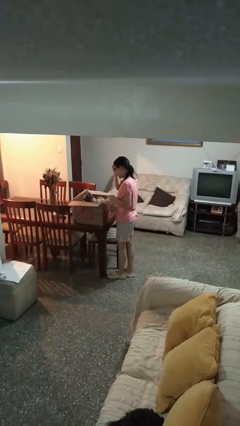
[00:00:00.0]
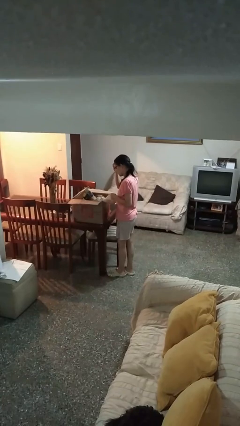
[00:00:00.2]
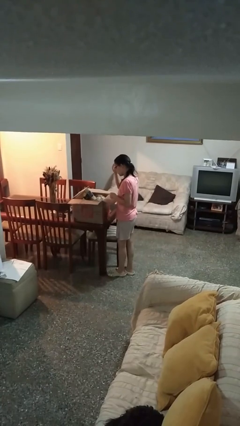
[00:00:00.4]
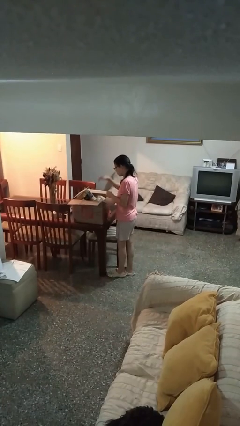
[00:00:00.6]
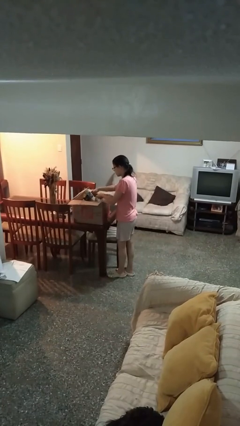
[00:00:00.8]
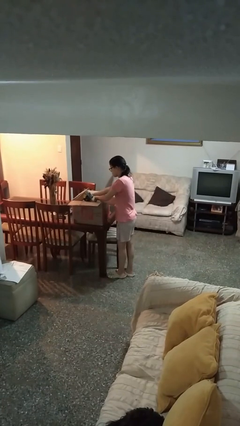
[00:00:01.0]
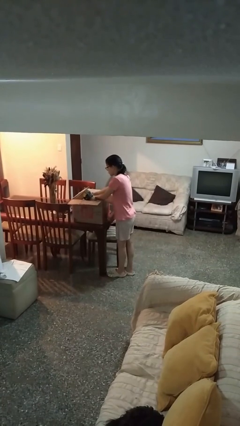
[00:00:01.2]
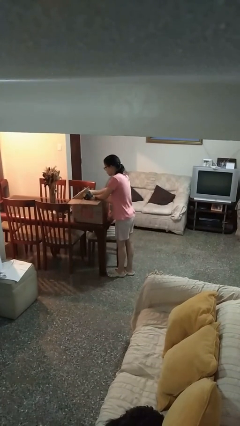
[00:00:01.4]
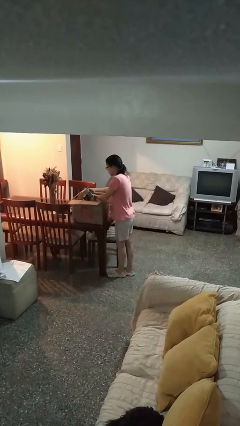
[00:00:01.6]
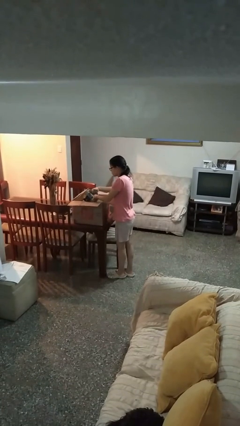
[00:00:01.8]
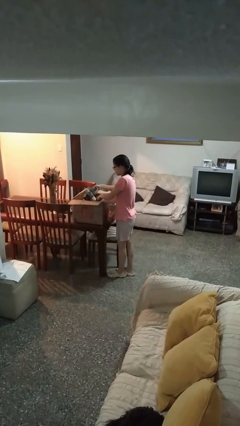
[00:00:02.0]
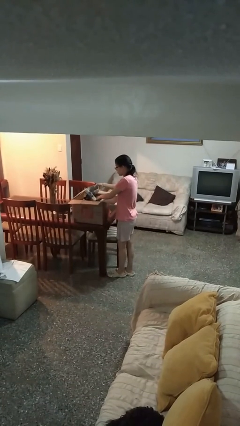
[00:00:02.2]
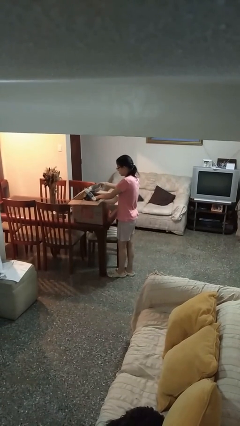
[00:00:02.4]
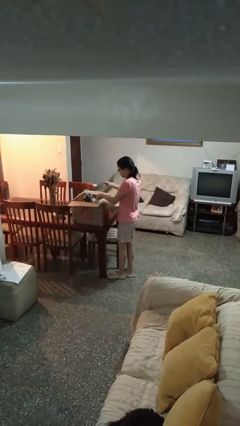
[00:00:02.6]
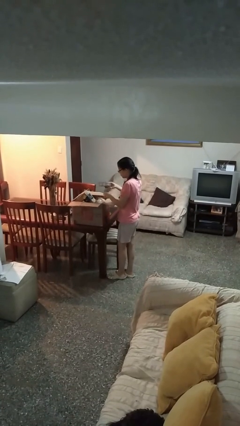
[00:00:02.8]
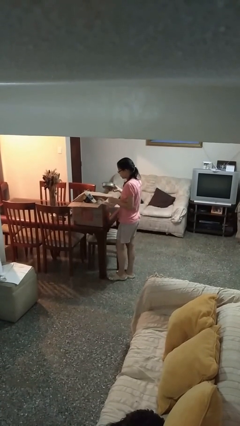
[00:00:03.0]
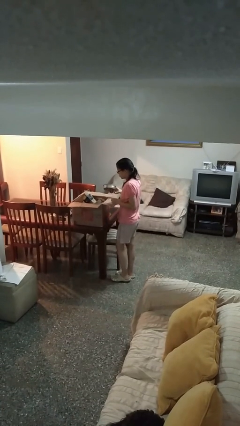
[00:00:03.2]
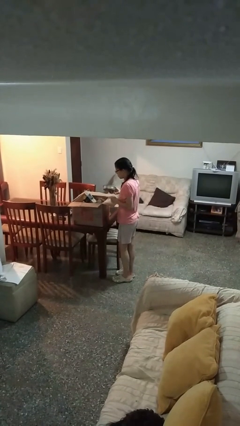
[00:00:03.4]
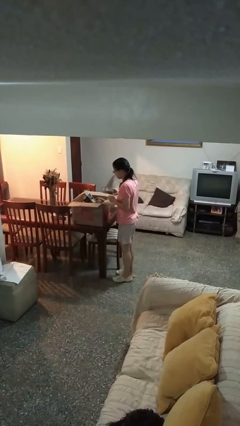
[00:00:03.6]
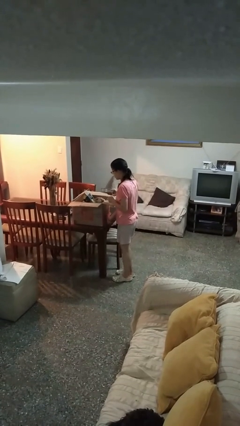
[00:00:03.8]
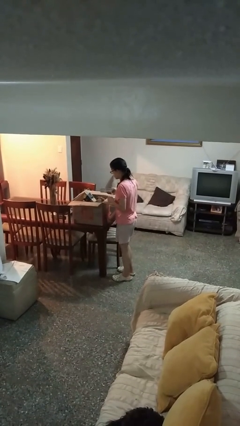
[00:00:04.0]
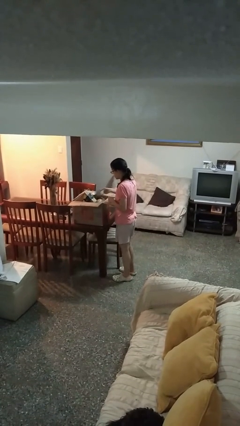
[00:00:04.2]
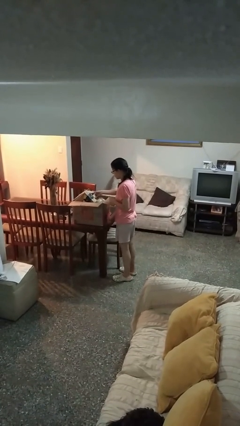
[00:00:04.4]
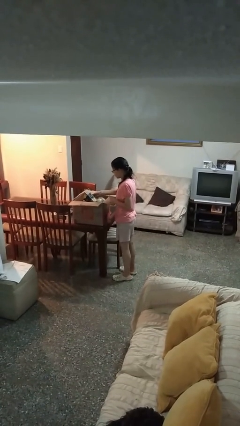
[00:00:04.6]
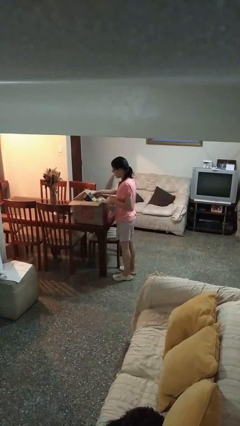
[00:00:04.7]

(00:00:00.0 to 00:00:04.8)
person searches in box

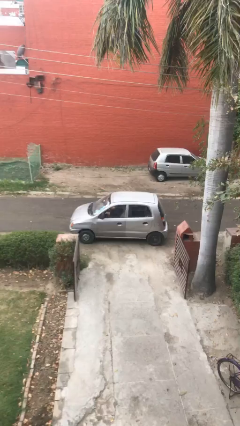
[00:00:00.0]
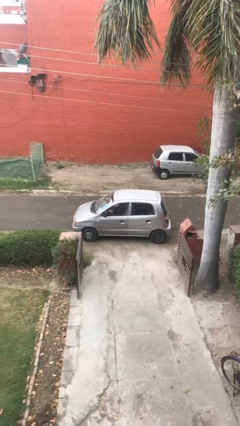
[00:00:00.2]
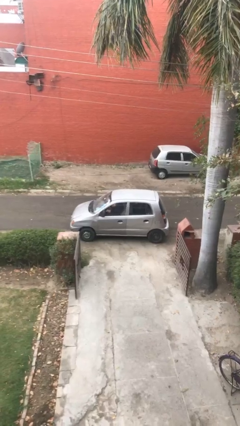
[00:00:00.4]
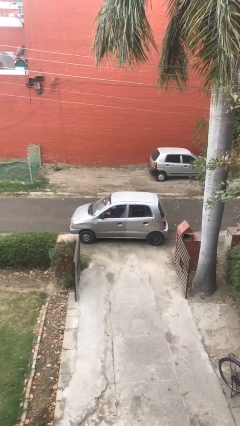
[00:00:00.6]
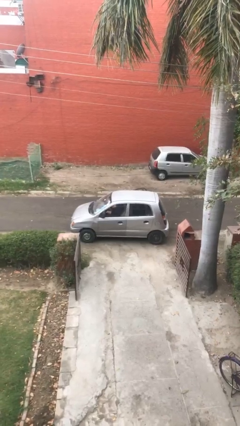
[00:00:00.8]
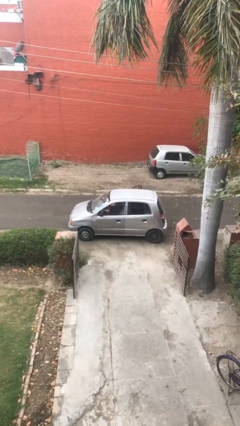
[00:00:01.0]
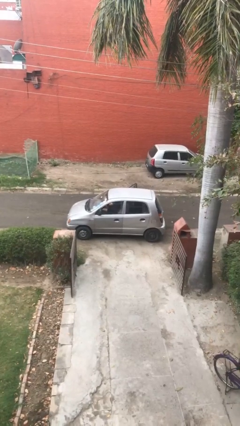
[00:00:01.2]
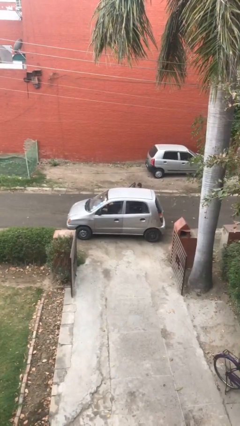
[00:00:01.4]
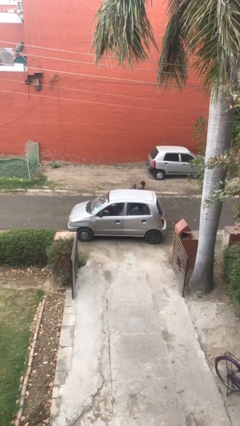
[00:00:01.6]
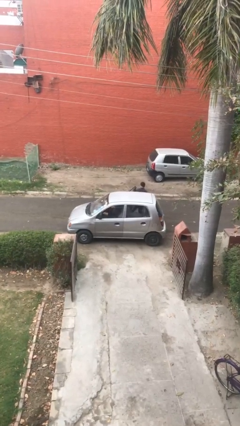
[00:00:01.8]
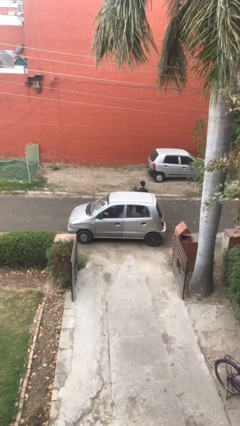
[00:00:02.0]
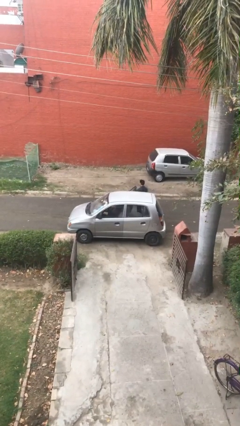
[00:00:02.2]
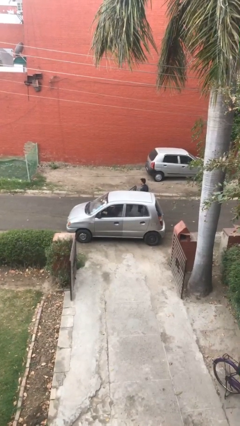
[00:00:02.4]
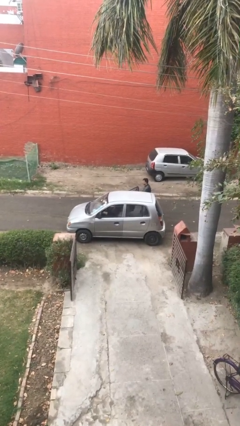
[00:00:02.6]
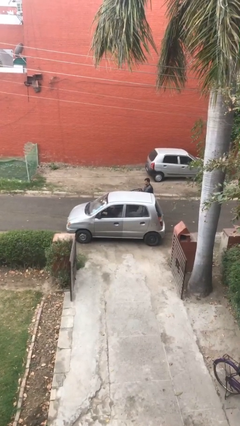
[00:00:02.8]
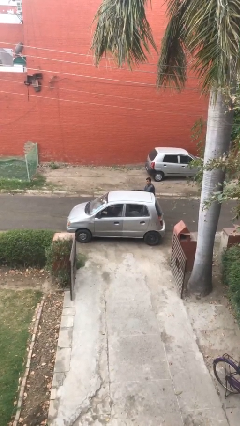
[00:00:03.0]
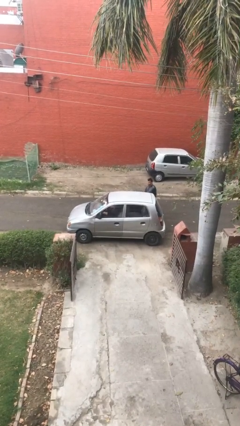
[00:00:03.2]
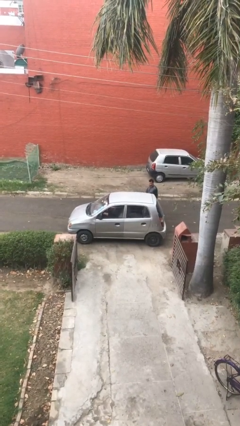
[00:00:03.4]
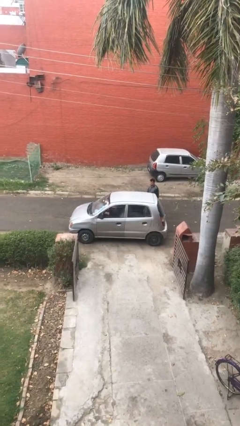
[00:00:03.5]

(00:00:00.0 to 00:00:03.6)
car drops off person

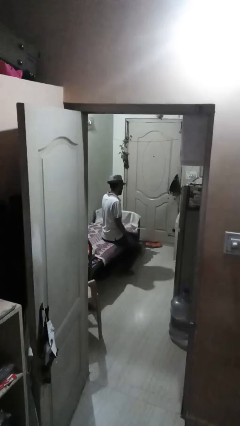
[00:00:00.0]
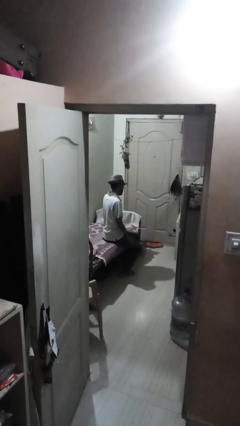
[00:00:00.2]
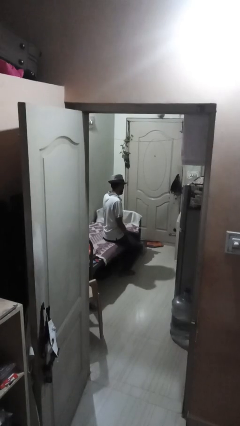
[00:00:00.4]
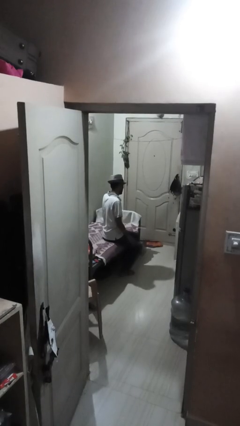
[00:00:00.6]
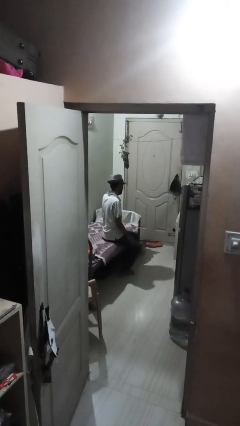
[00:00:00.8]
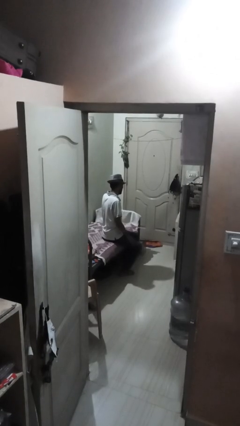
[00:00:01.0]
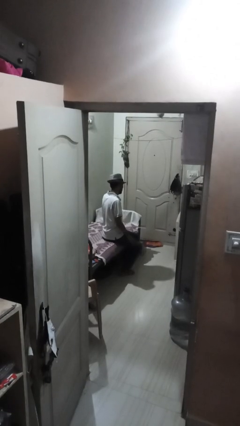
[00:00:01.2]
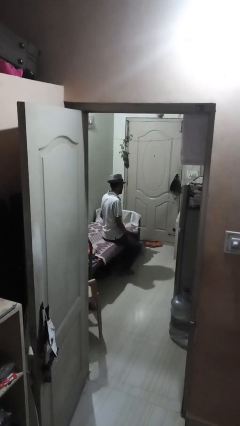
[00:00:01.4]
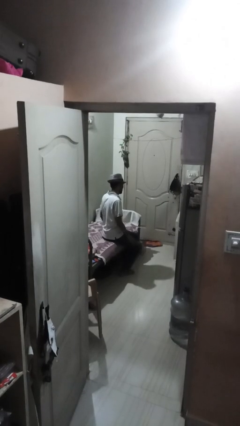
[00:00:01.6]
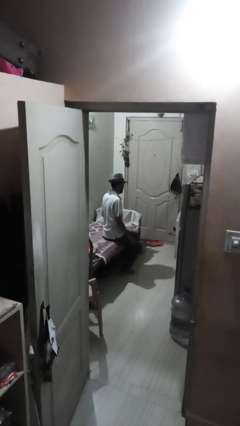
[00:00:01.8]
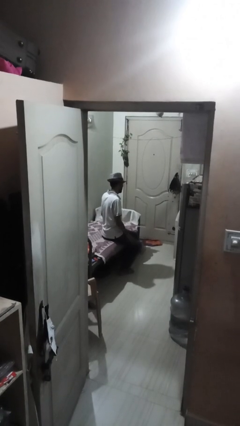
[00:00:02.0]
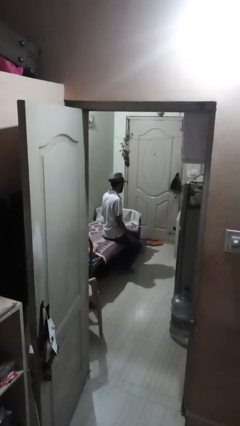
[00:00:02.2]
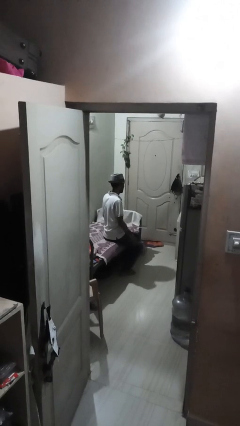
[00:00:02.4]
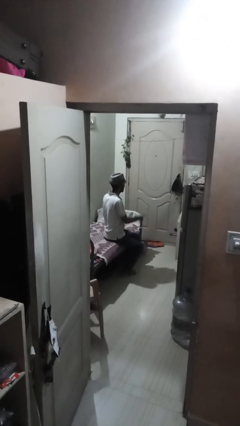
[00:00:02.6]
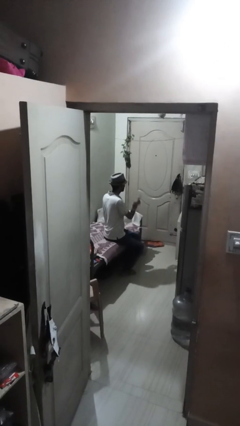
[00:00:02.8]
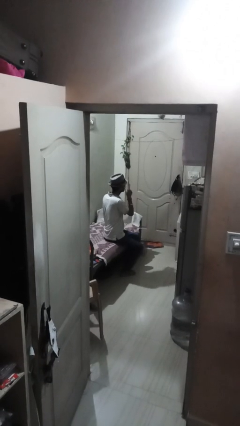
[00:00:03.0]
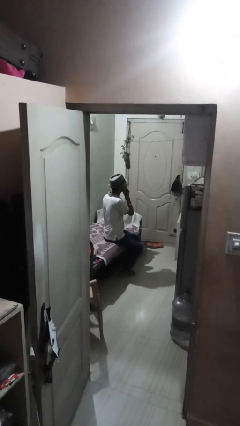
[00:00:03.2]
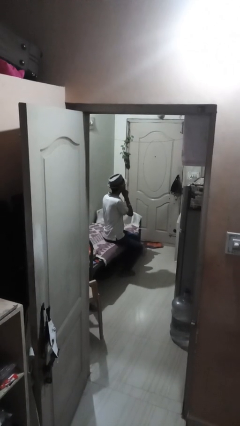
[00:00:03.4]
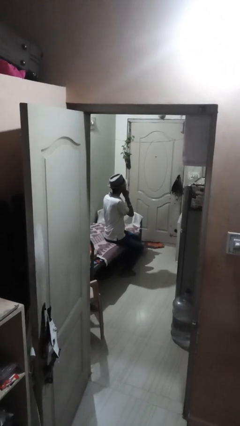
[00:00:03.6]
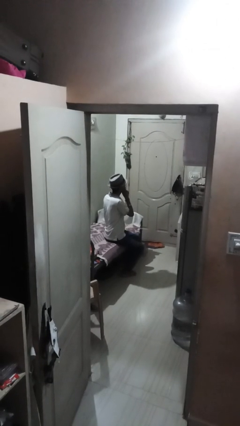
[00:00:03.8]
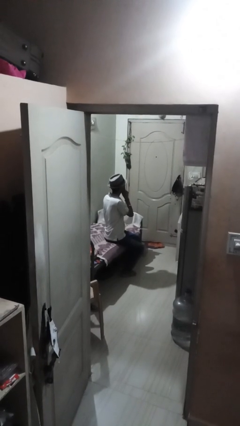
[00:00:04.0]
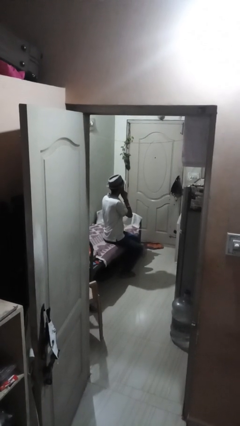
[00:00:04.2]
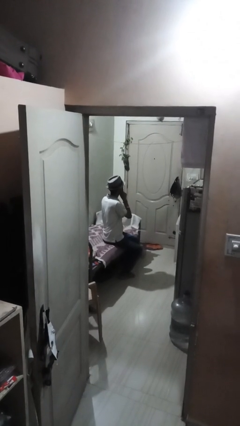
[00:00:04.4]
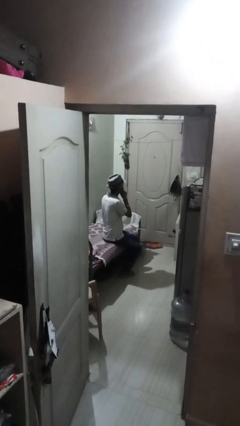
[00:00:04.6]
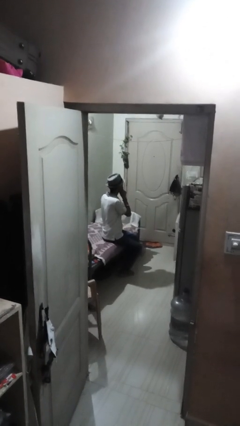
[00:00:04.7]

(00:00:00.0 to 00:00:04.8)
person gestures be quiet

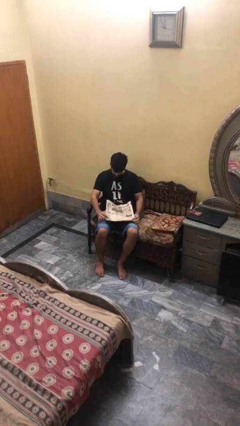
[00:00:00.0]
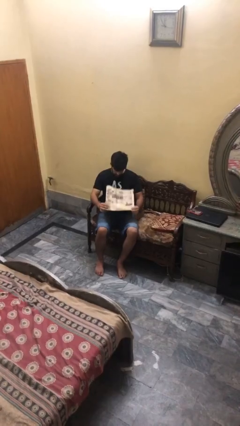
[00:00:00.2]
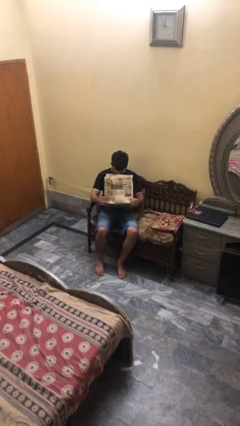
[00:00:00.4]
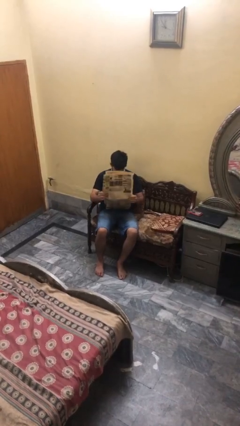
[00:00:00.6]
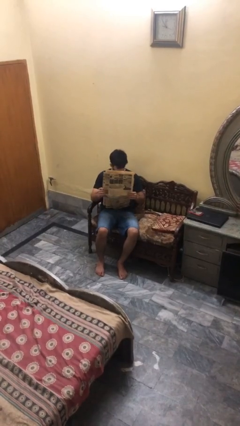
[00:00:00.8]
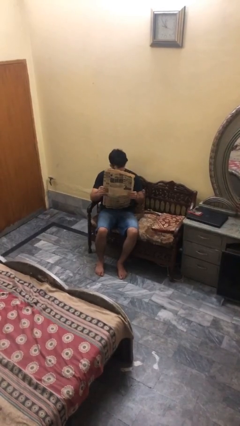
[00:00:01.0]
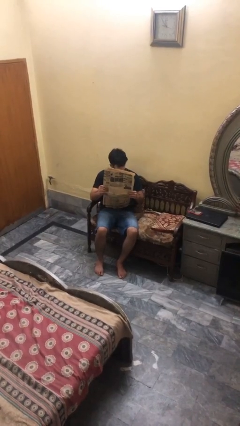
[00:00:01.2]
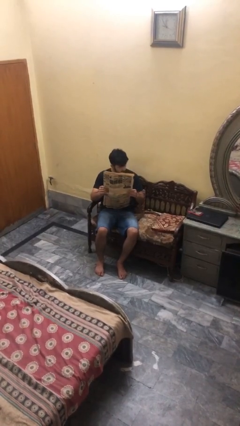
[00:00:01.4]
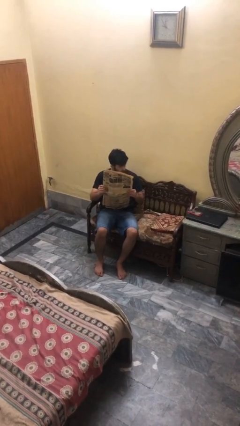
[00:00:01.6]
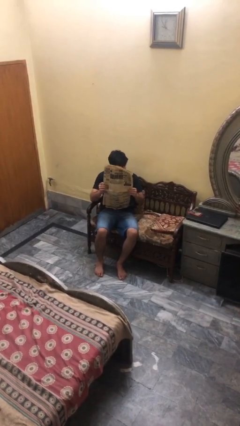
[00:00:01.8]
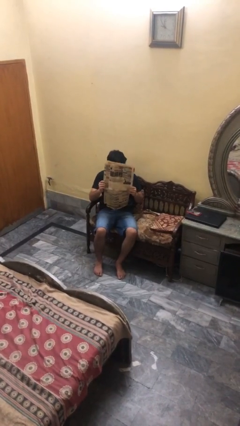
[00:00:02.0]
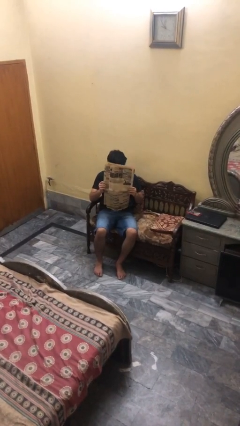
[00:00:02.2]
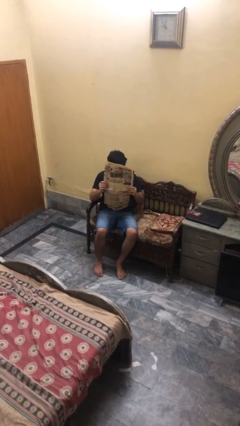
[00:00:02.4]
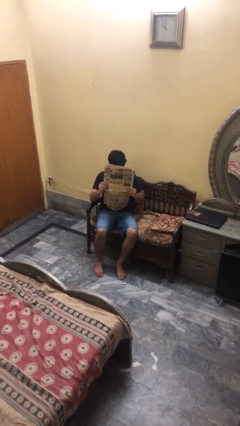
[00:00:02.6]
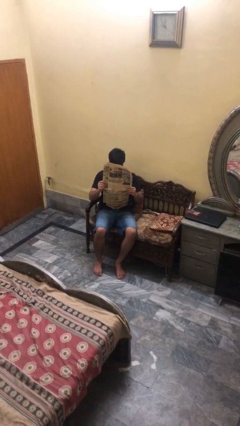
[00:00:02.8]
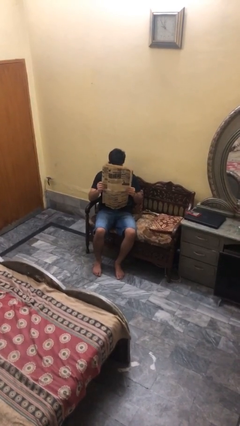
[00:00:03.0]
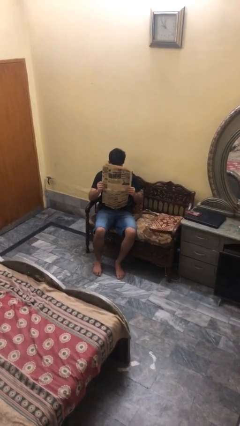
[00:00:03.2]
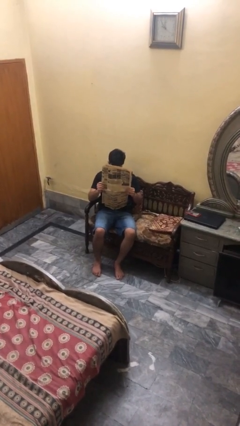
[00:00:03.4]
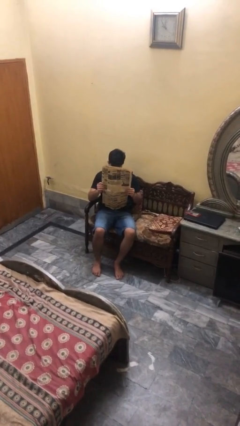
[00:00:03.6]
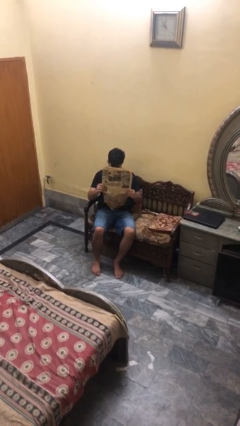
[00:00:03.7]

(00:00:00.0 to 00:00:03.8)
person reads newspaper

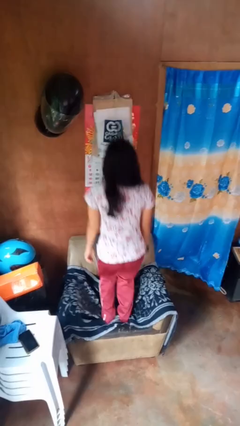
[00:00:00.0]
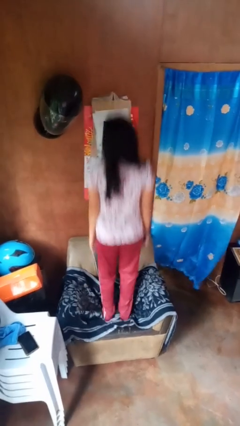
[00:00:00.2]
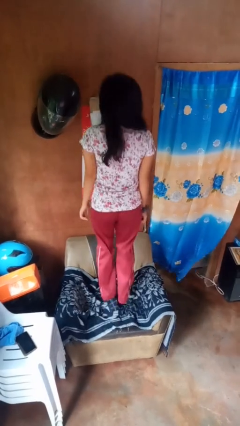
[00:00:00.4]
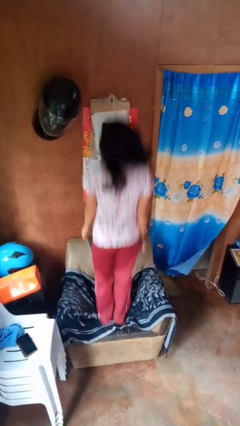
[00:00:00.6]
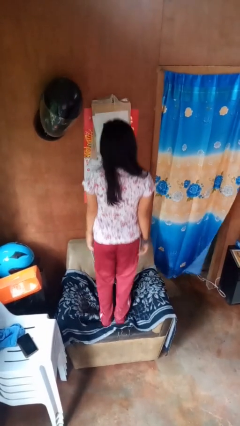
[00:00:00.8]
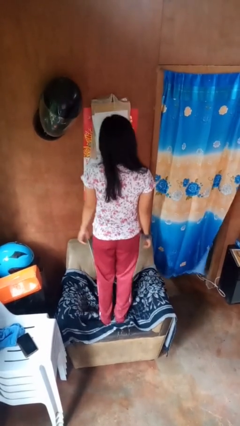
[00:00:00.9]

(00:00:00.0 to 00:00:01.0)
person jumps on couch
